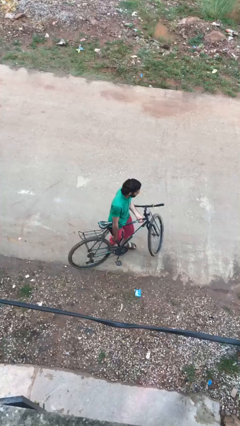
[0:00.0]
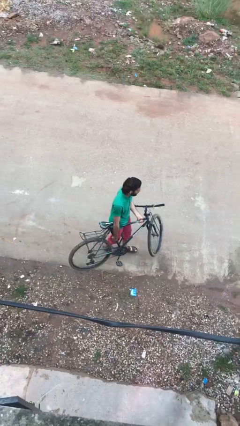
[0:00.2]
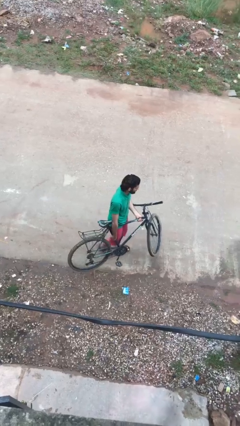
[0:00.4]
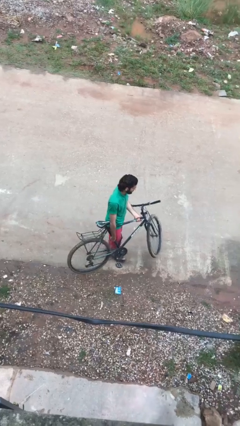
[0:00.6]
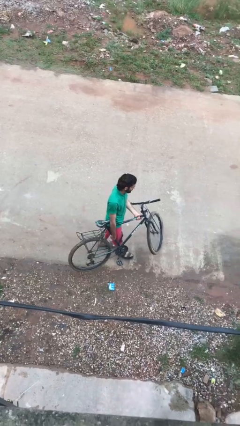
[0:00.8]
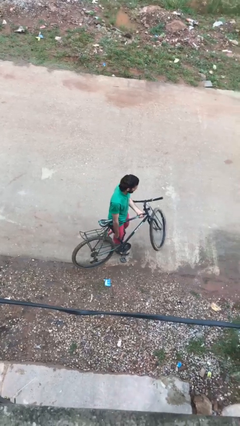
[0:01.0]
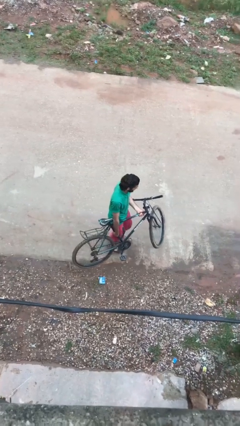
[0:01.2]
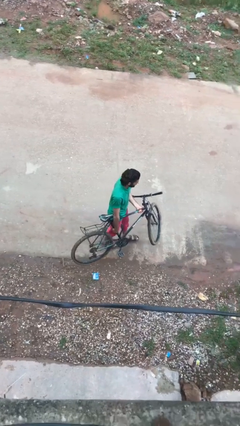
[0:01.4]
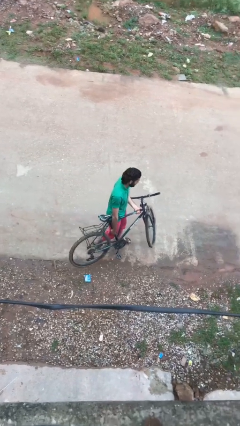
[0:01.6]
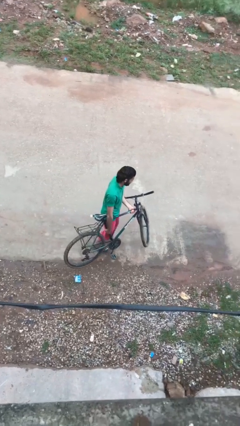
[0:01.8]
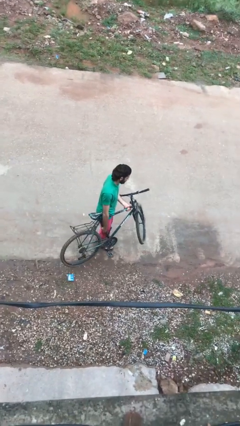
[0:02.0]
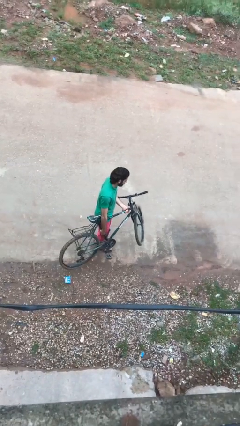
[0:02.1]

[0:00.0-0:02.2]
person carries bicycle

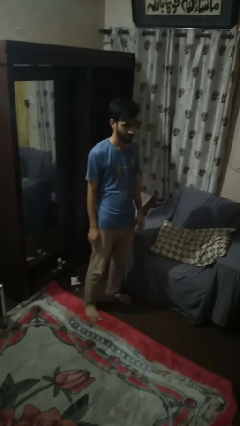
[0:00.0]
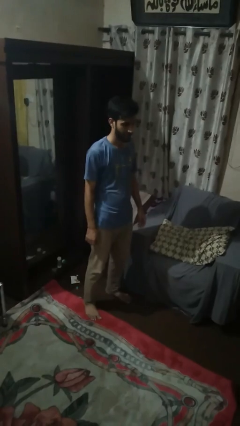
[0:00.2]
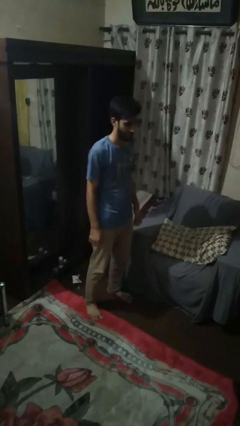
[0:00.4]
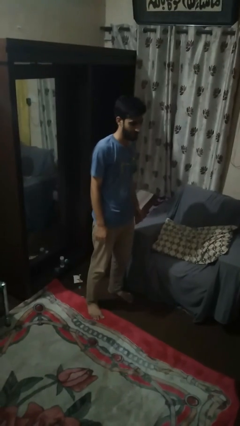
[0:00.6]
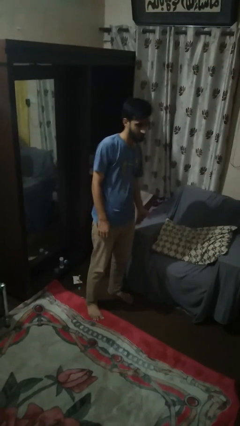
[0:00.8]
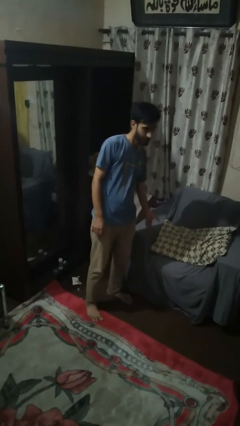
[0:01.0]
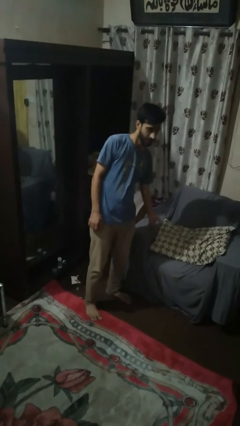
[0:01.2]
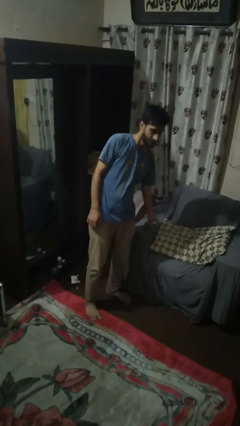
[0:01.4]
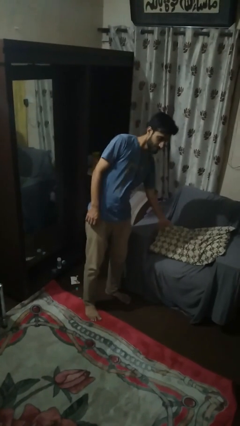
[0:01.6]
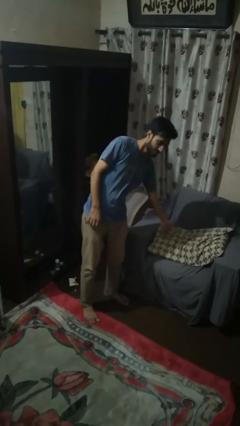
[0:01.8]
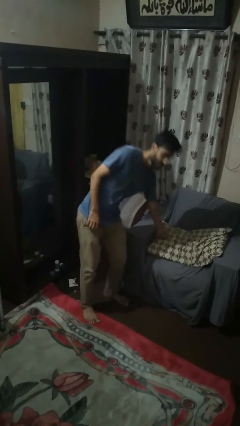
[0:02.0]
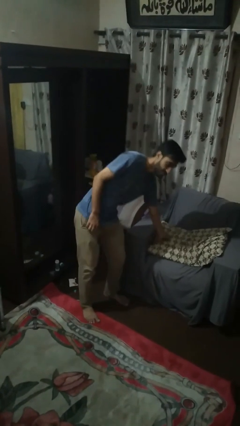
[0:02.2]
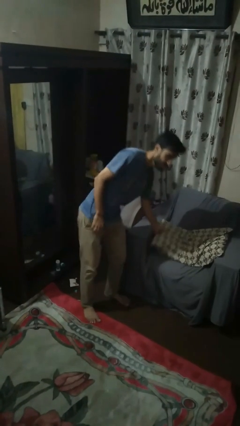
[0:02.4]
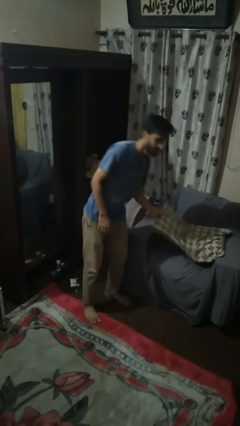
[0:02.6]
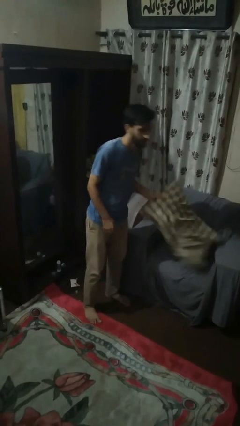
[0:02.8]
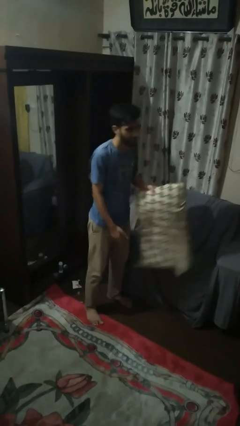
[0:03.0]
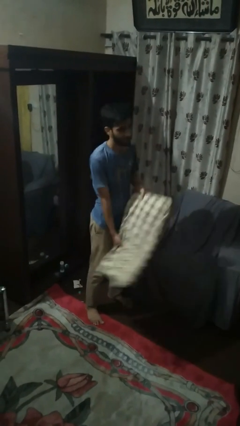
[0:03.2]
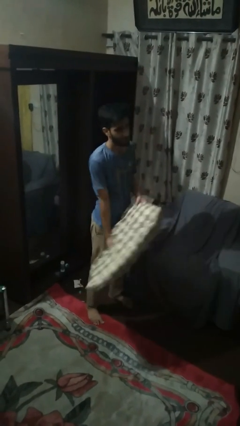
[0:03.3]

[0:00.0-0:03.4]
person picks up object from couch

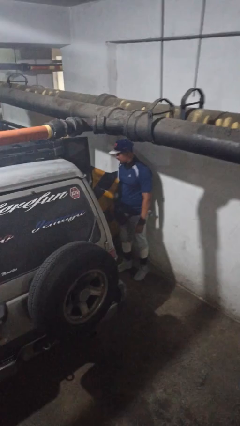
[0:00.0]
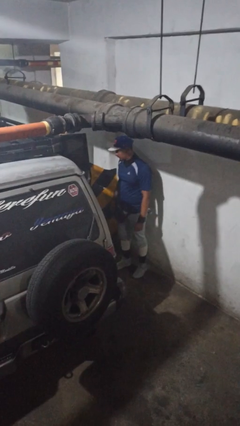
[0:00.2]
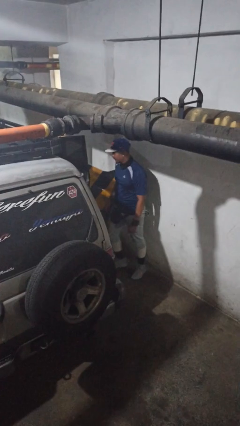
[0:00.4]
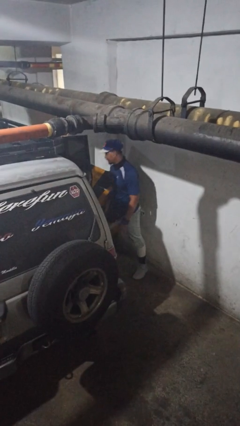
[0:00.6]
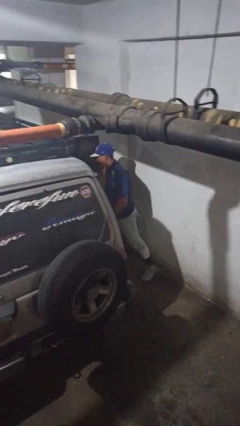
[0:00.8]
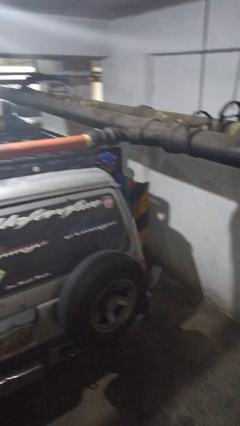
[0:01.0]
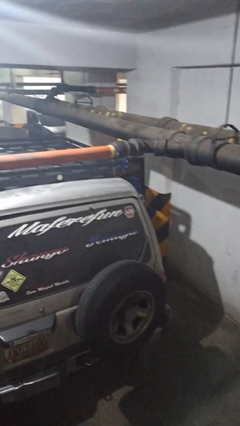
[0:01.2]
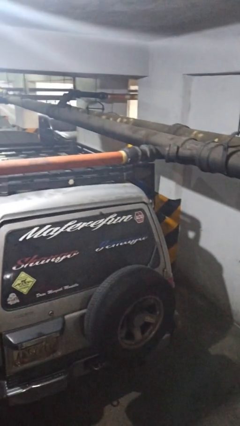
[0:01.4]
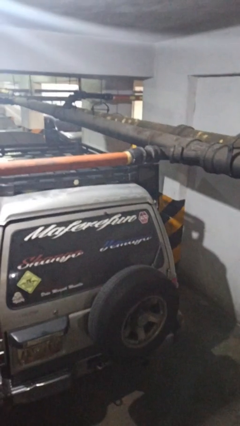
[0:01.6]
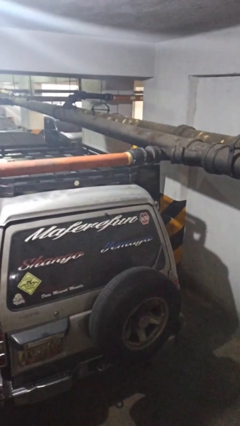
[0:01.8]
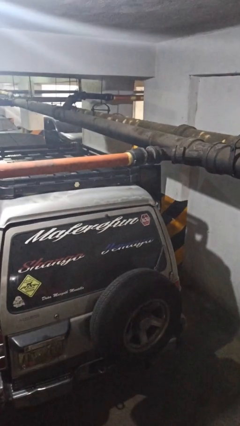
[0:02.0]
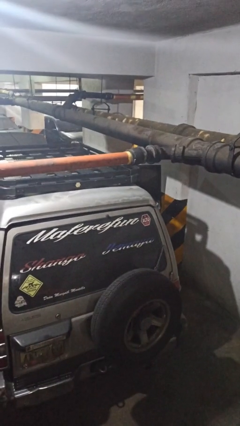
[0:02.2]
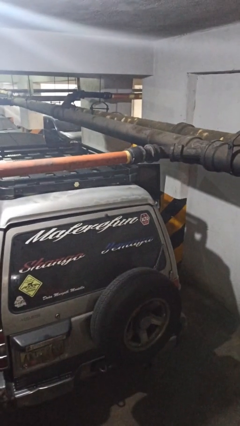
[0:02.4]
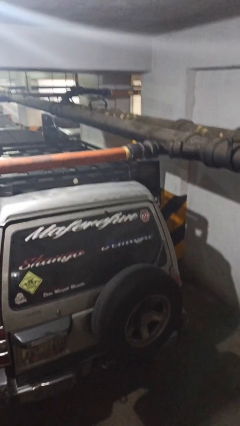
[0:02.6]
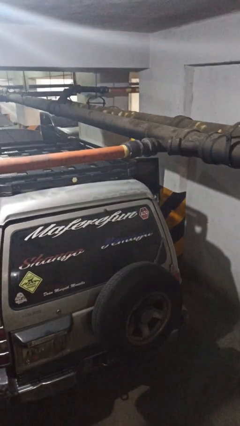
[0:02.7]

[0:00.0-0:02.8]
person enters car

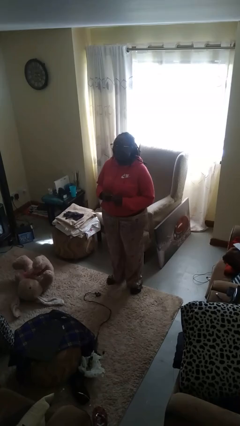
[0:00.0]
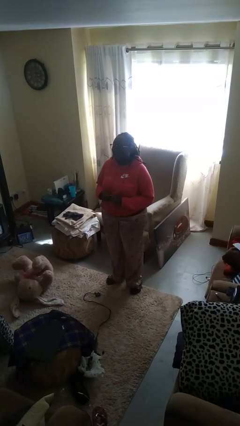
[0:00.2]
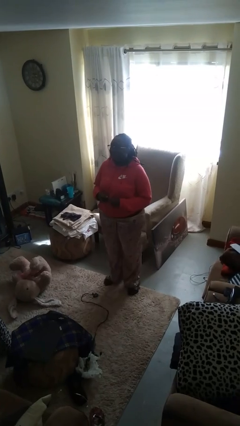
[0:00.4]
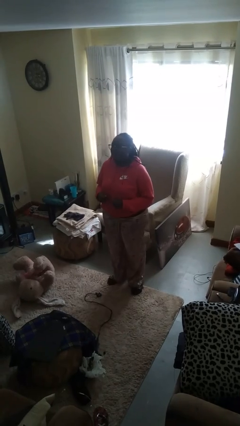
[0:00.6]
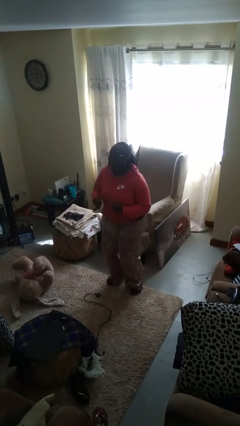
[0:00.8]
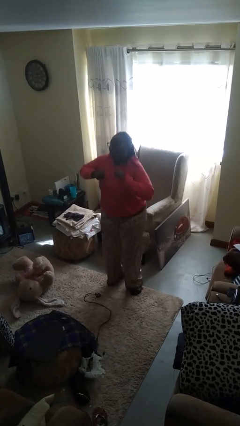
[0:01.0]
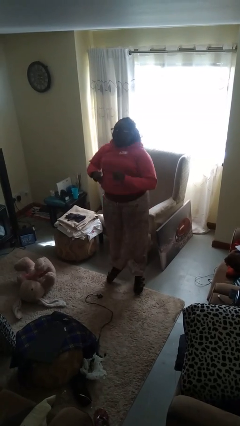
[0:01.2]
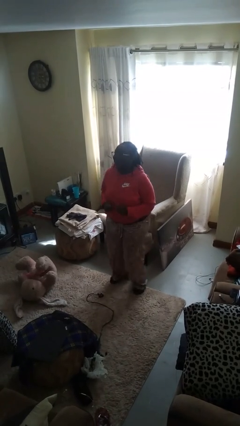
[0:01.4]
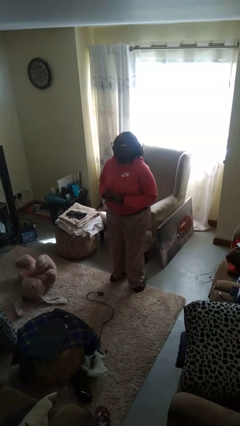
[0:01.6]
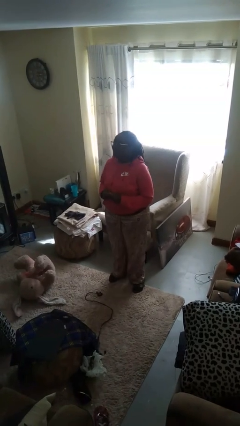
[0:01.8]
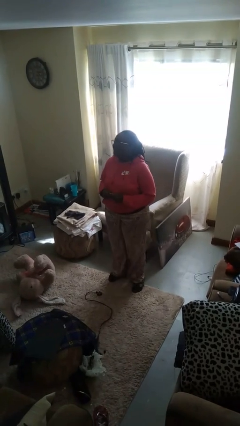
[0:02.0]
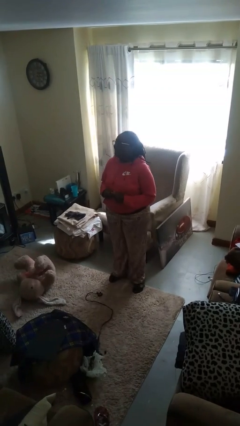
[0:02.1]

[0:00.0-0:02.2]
person jumps

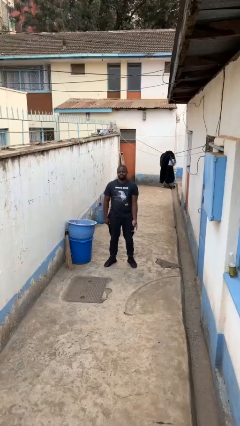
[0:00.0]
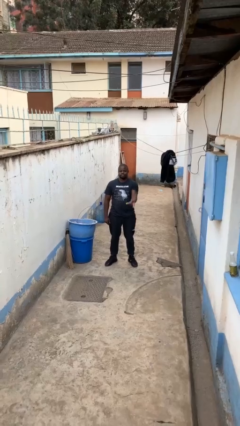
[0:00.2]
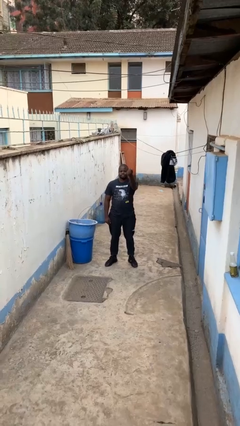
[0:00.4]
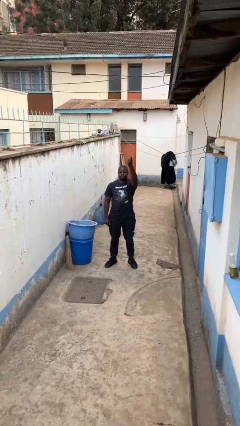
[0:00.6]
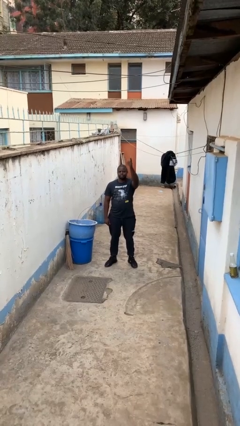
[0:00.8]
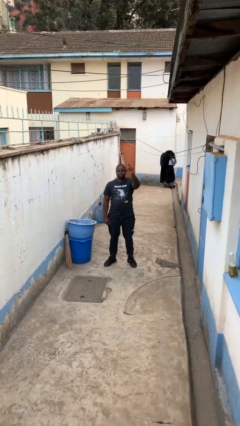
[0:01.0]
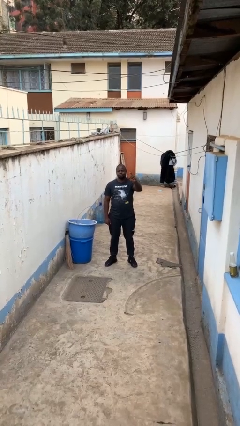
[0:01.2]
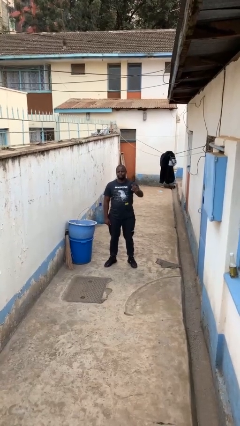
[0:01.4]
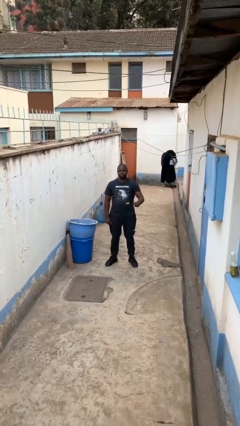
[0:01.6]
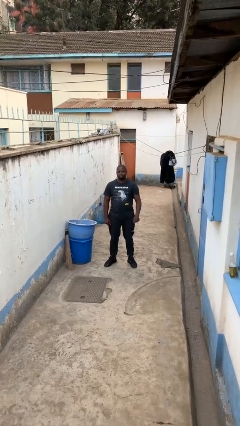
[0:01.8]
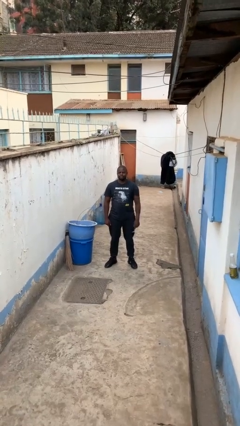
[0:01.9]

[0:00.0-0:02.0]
person gestures swipe up

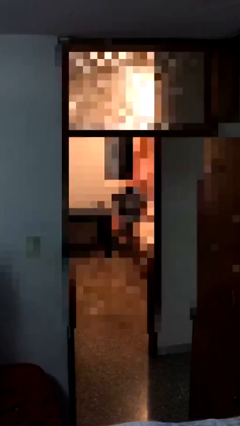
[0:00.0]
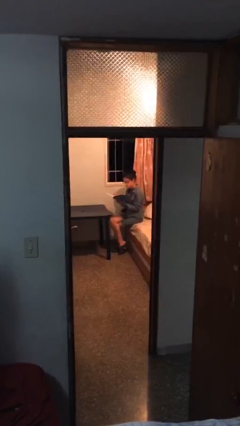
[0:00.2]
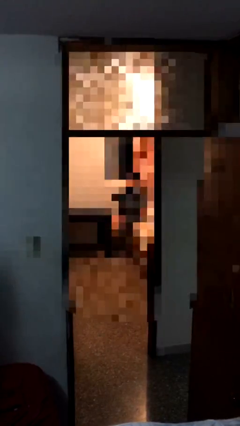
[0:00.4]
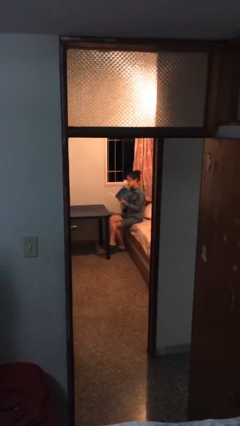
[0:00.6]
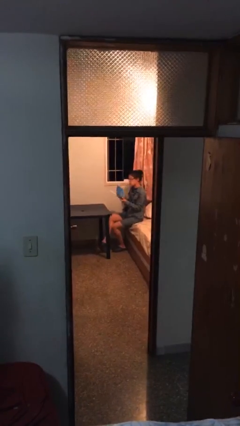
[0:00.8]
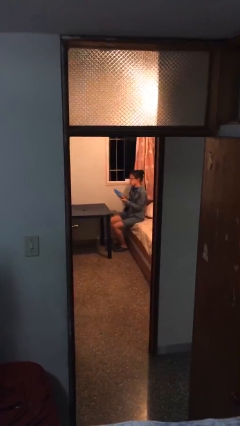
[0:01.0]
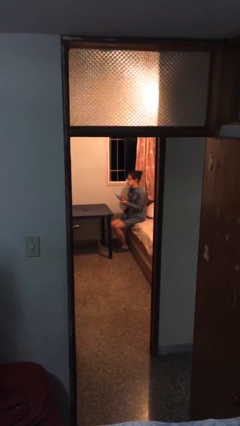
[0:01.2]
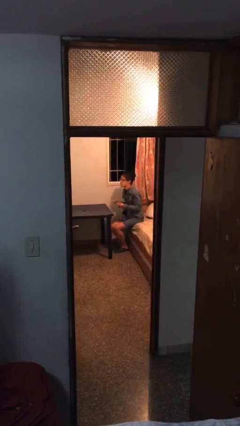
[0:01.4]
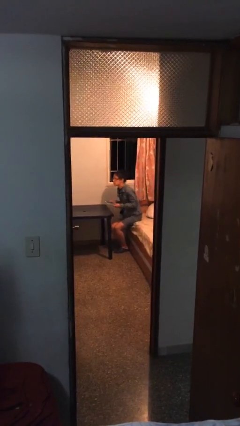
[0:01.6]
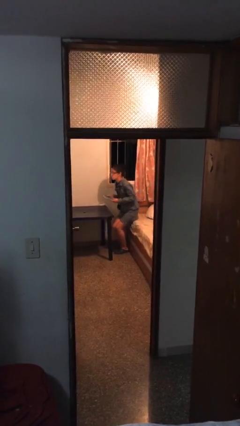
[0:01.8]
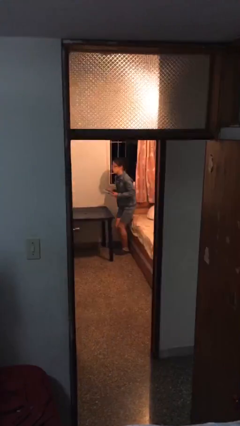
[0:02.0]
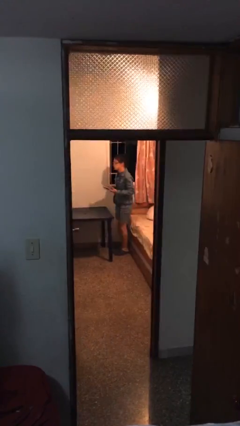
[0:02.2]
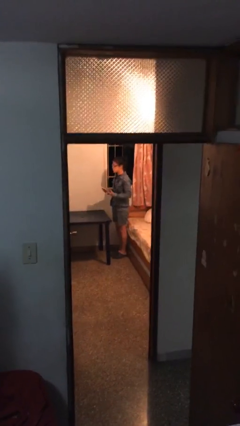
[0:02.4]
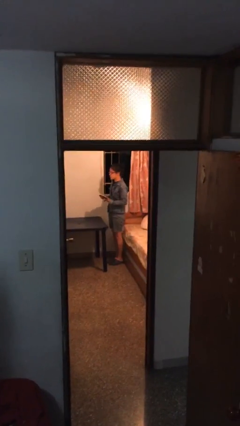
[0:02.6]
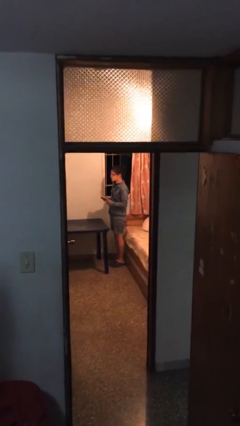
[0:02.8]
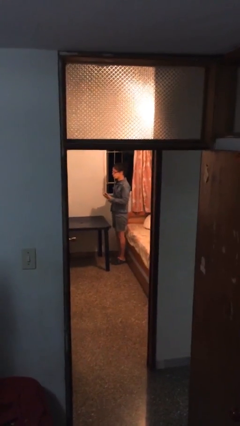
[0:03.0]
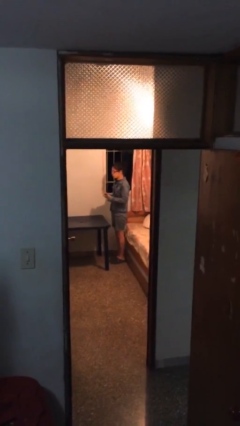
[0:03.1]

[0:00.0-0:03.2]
person stands up

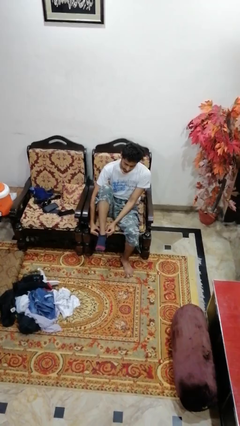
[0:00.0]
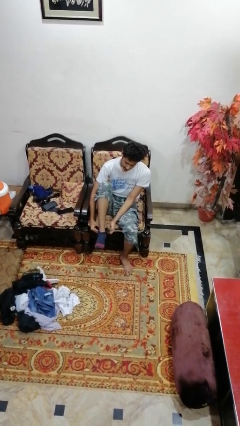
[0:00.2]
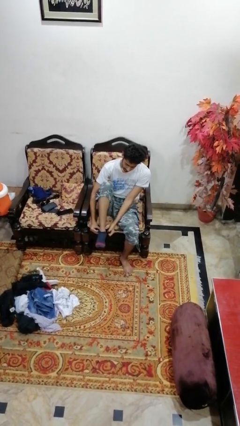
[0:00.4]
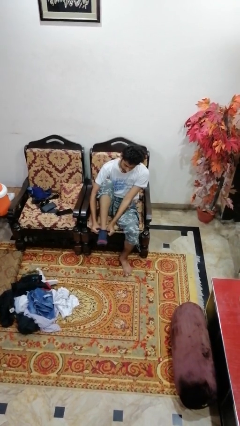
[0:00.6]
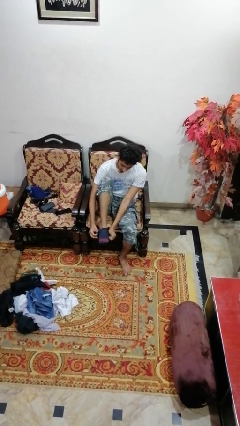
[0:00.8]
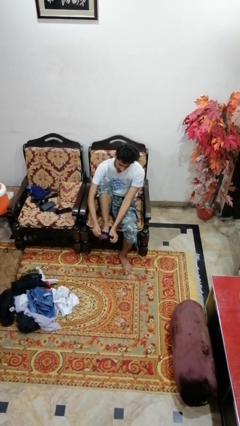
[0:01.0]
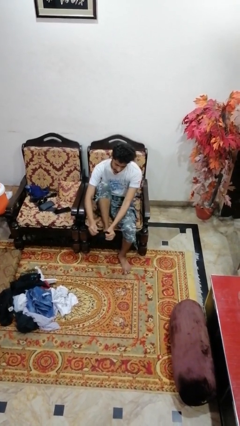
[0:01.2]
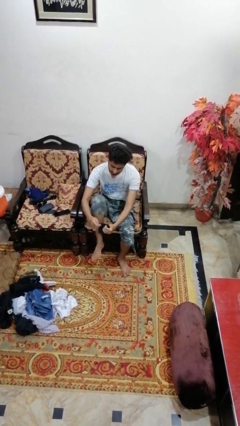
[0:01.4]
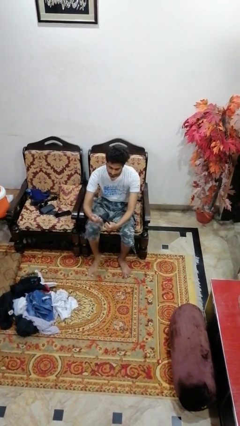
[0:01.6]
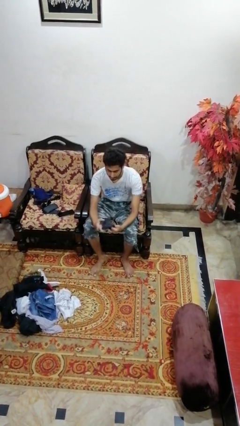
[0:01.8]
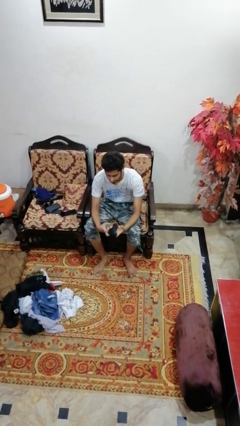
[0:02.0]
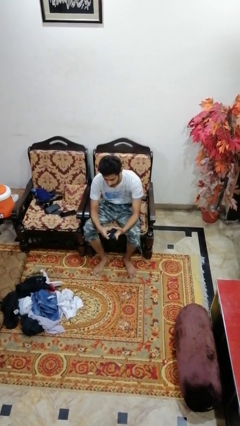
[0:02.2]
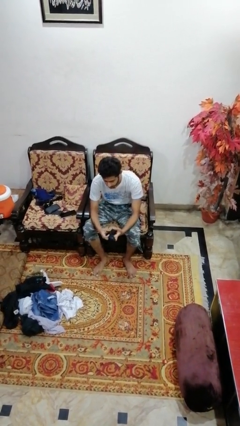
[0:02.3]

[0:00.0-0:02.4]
person takes off socks
